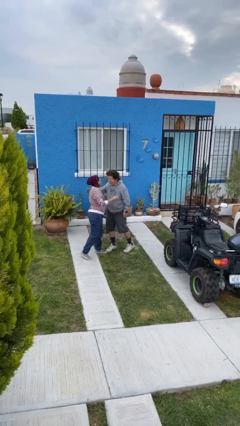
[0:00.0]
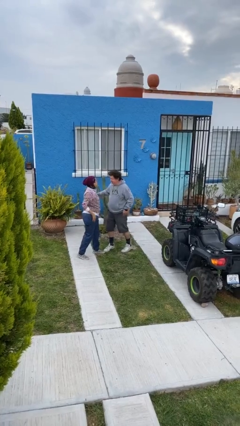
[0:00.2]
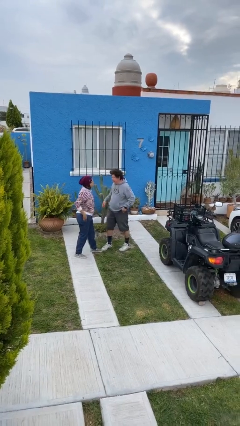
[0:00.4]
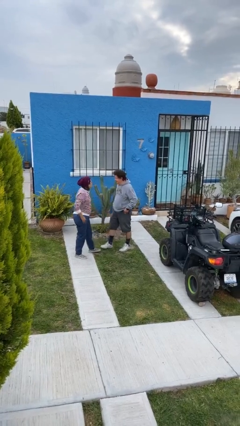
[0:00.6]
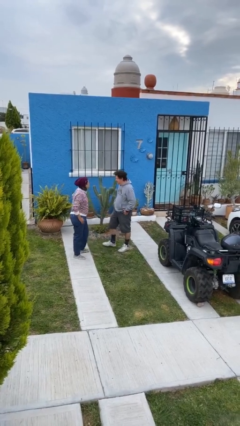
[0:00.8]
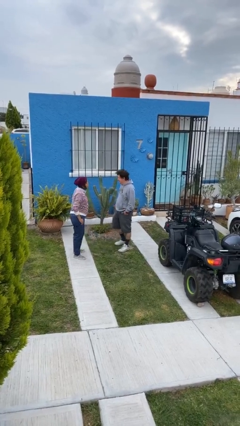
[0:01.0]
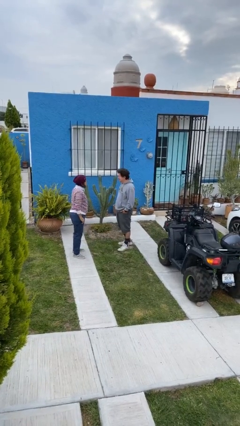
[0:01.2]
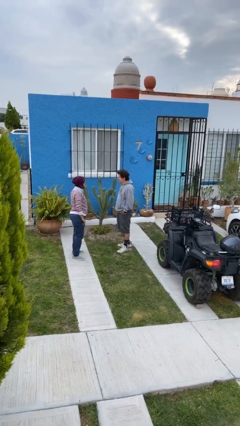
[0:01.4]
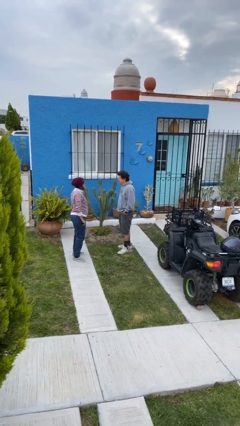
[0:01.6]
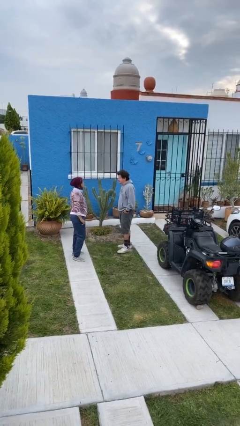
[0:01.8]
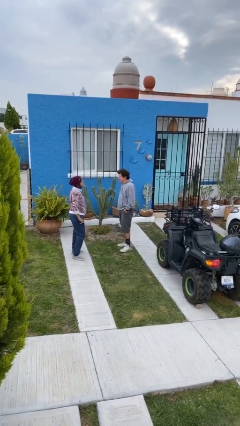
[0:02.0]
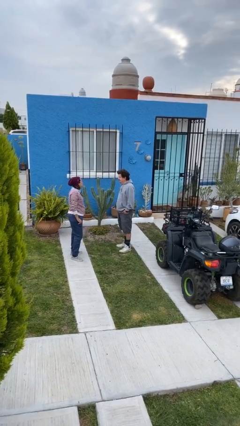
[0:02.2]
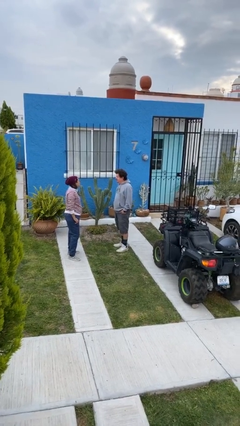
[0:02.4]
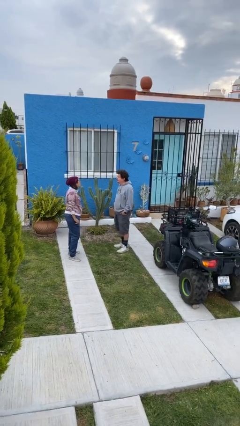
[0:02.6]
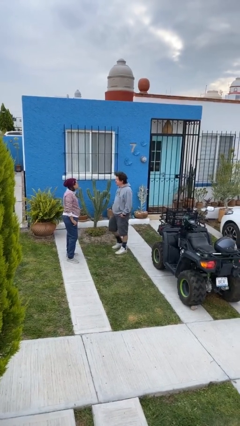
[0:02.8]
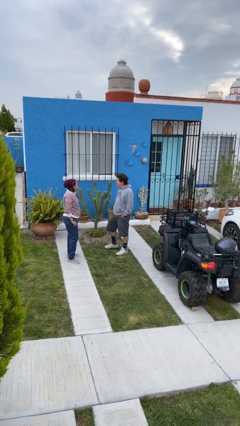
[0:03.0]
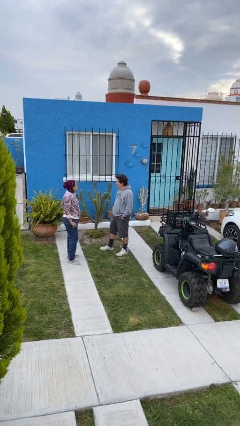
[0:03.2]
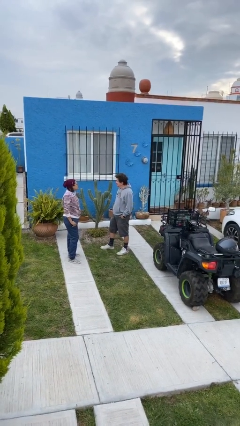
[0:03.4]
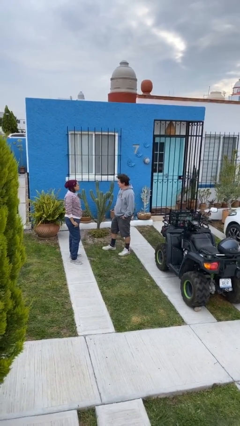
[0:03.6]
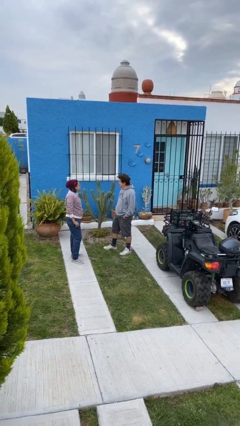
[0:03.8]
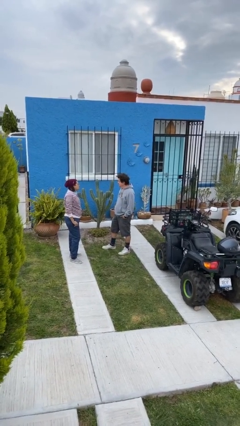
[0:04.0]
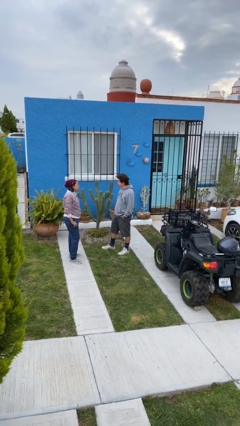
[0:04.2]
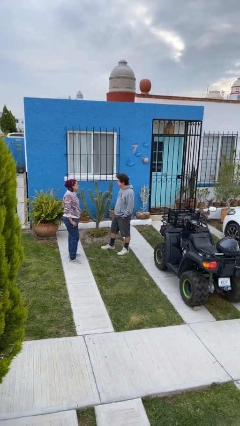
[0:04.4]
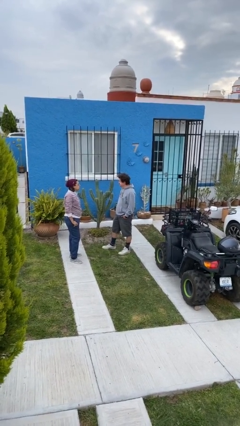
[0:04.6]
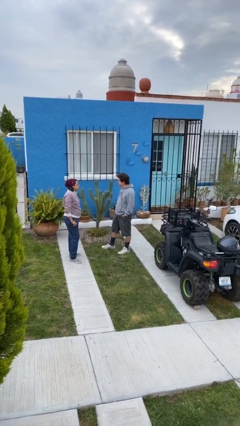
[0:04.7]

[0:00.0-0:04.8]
person talks to person

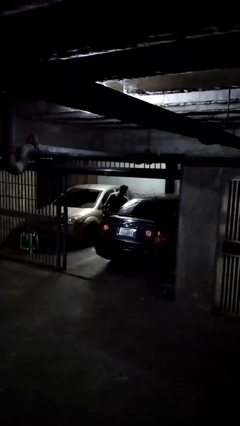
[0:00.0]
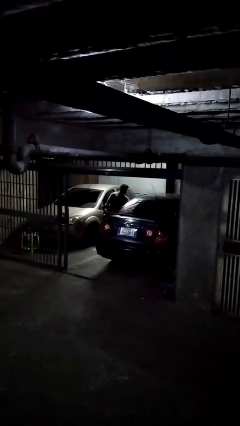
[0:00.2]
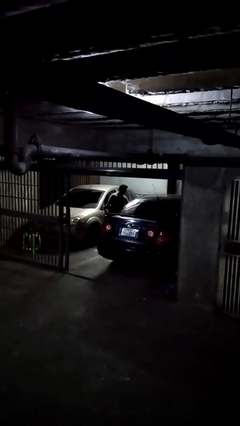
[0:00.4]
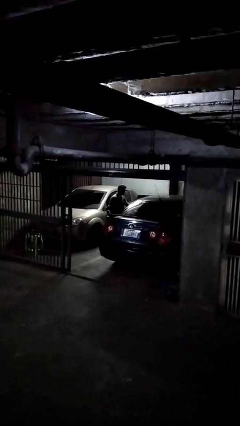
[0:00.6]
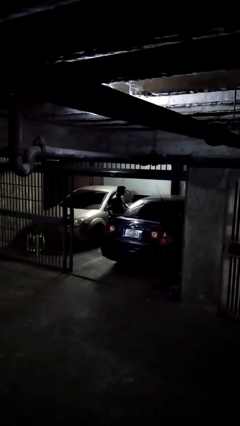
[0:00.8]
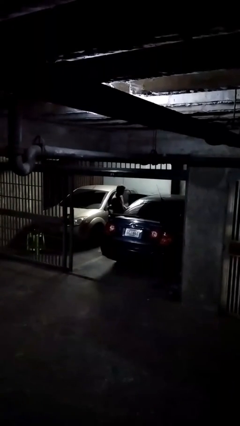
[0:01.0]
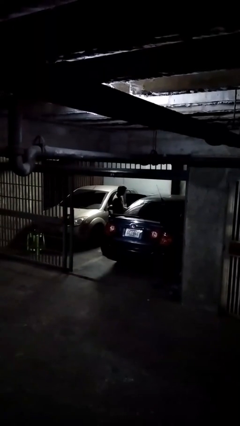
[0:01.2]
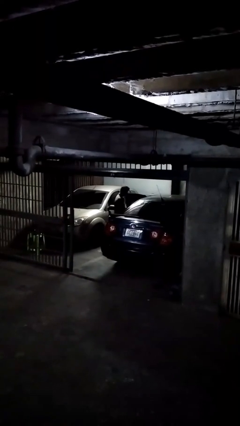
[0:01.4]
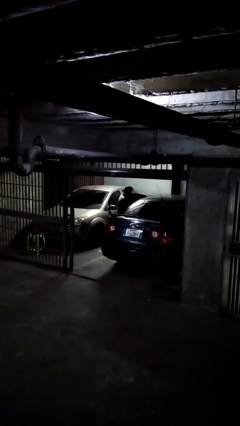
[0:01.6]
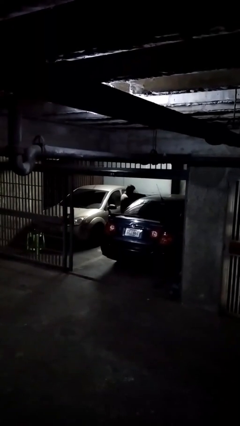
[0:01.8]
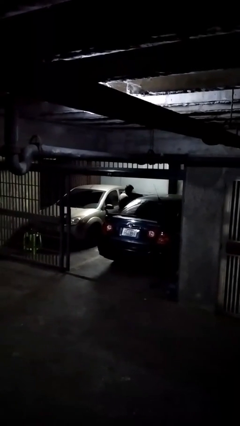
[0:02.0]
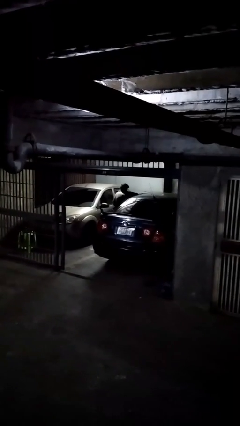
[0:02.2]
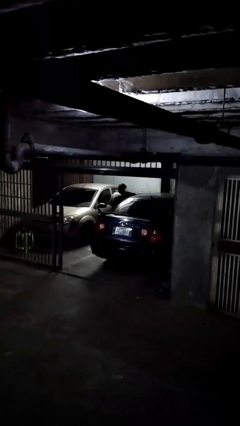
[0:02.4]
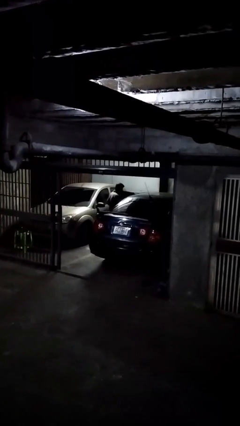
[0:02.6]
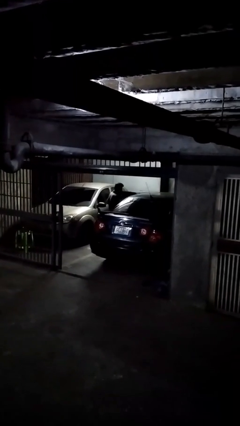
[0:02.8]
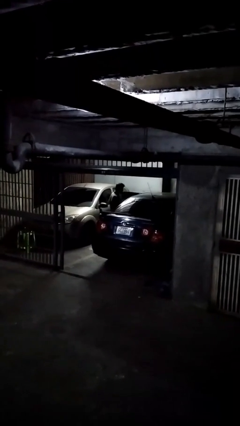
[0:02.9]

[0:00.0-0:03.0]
person opens car door

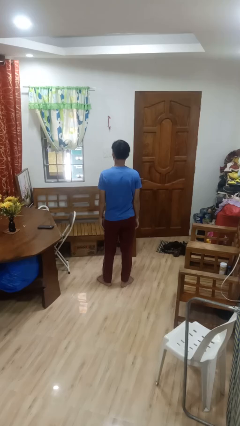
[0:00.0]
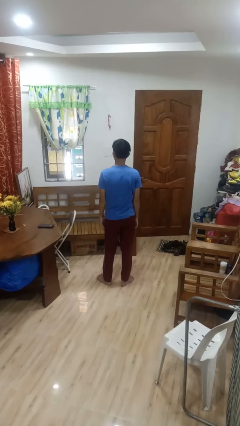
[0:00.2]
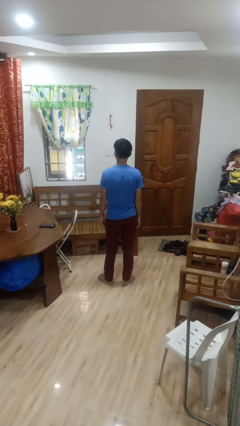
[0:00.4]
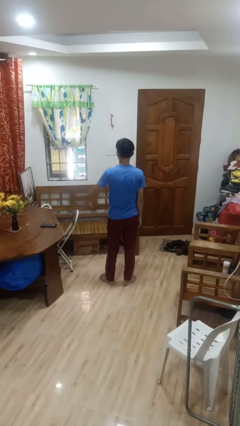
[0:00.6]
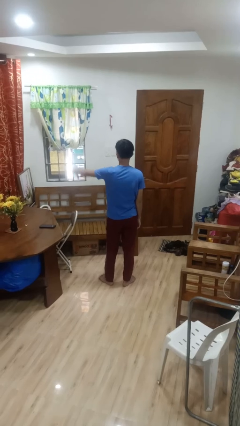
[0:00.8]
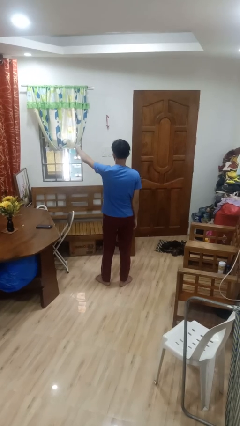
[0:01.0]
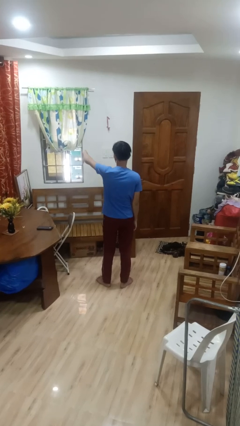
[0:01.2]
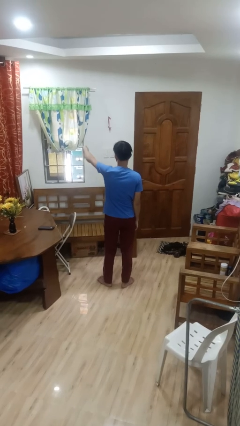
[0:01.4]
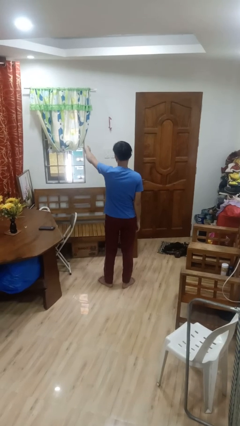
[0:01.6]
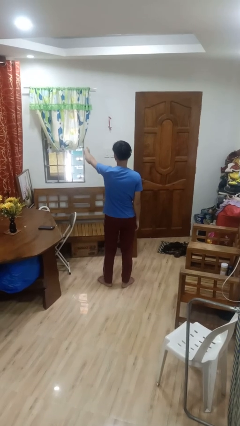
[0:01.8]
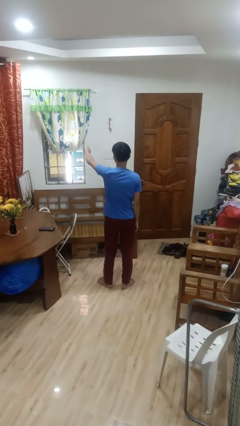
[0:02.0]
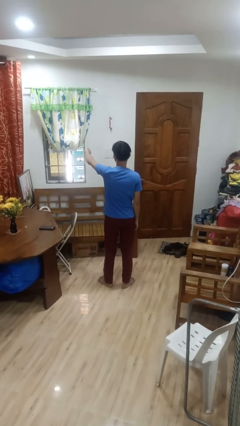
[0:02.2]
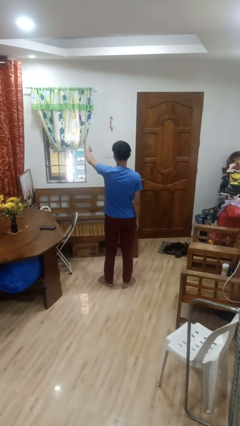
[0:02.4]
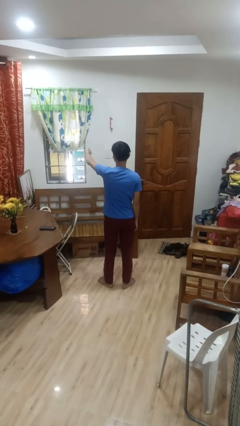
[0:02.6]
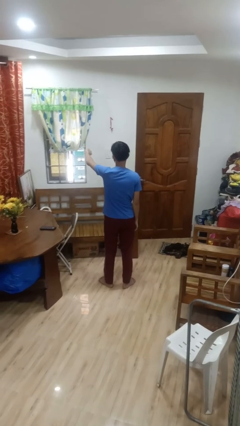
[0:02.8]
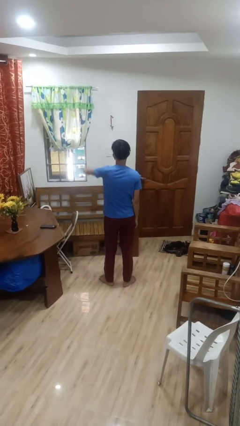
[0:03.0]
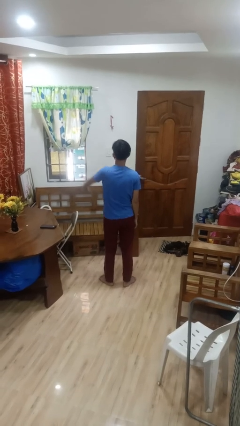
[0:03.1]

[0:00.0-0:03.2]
person gestures thumbs down

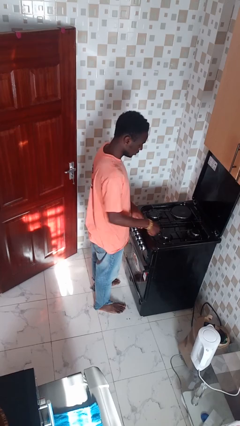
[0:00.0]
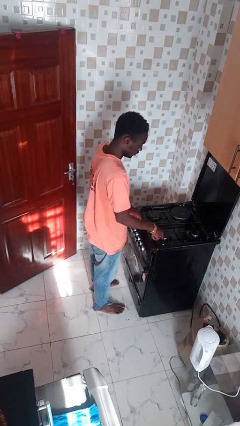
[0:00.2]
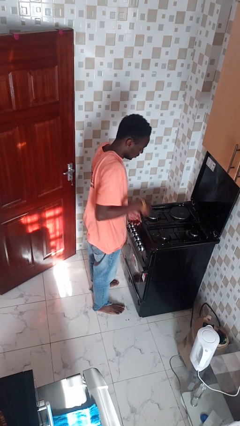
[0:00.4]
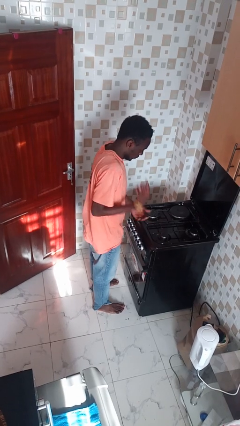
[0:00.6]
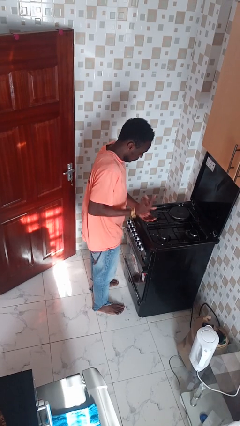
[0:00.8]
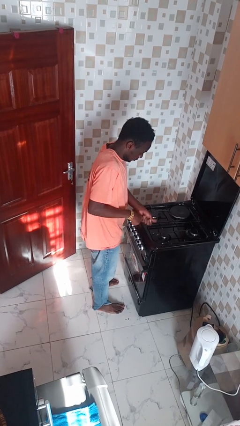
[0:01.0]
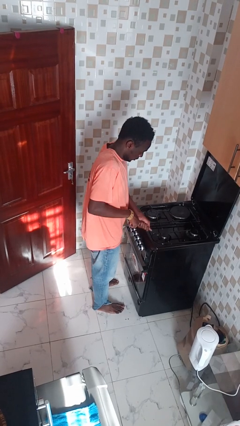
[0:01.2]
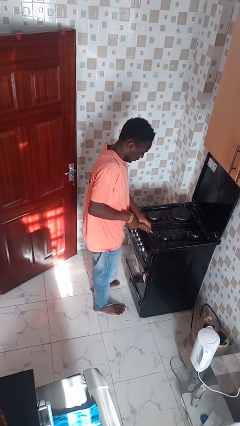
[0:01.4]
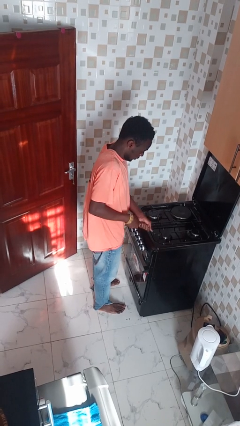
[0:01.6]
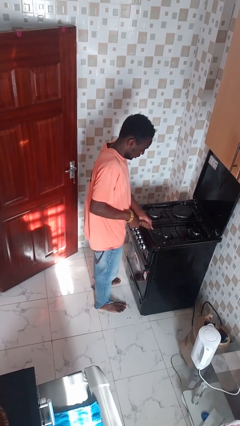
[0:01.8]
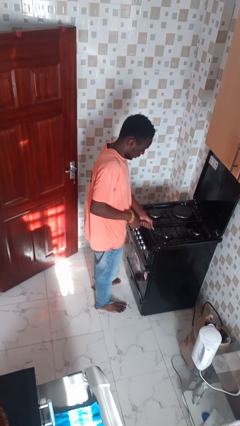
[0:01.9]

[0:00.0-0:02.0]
person burns hand

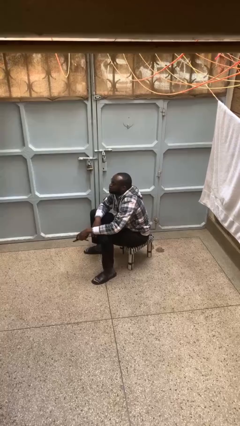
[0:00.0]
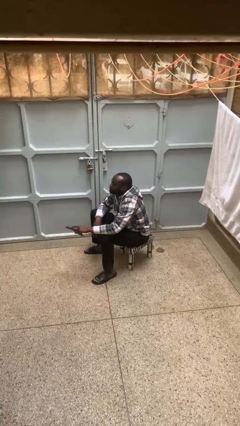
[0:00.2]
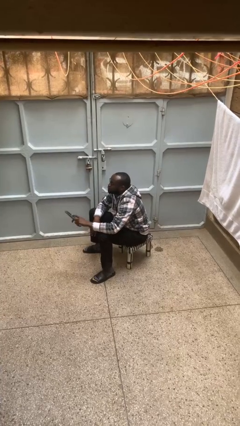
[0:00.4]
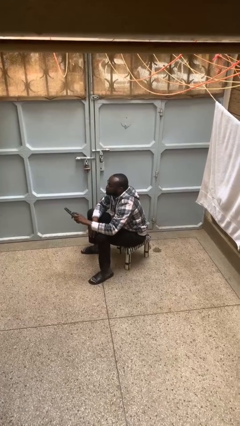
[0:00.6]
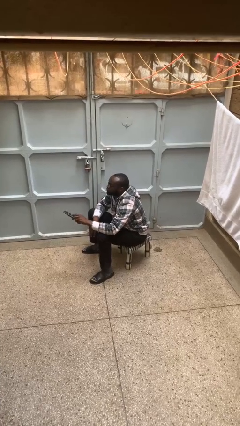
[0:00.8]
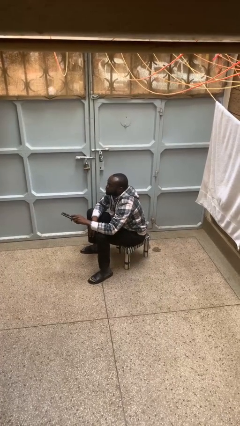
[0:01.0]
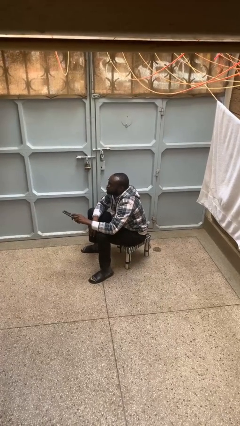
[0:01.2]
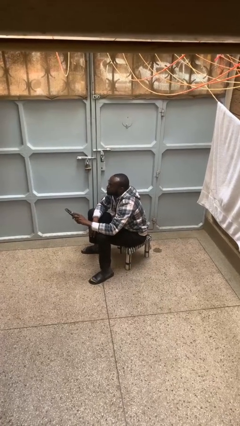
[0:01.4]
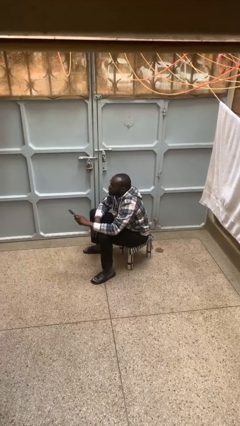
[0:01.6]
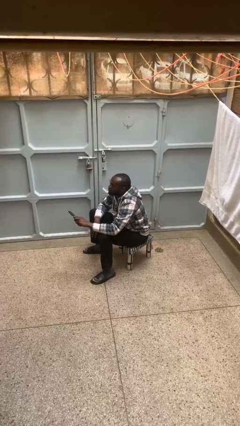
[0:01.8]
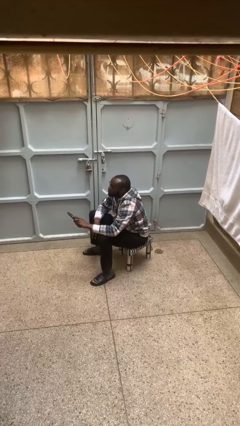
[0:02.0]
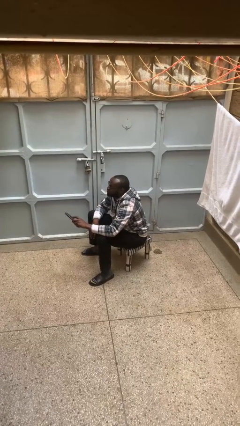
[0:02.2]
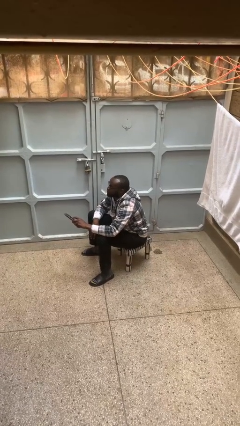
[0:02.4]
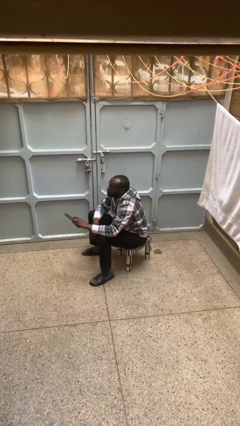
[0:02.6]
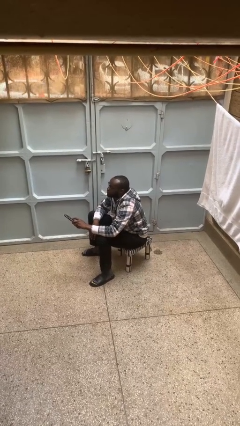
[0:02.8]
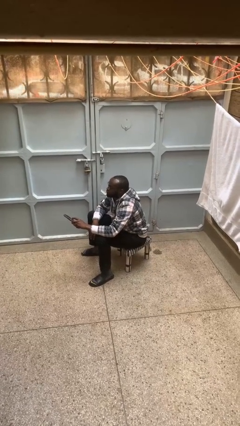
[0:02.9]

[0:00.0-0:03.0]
person uses television remote

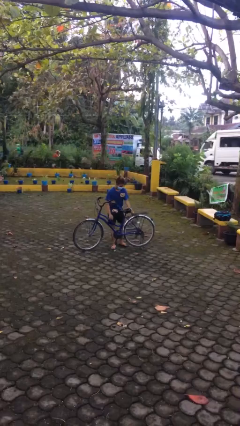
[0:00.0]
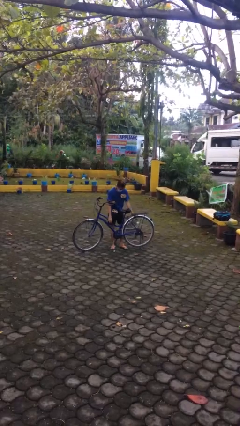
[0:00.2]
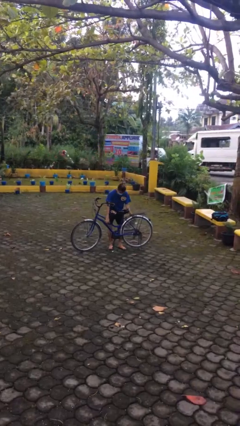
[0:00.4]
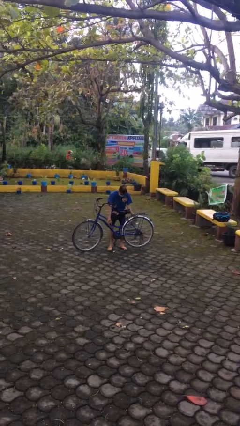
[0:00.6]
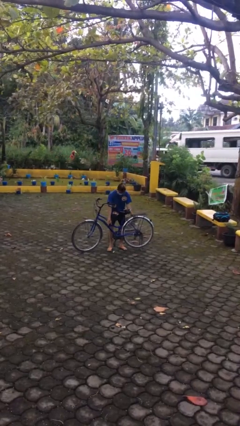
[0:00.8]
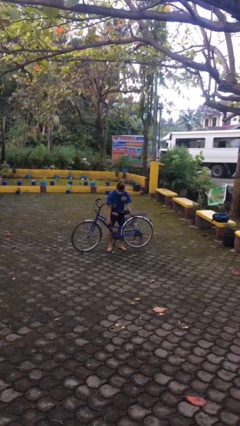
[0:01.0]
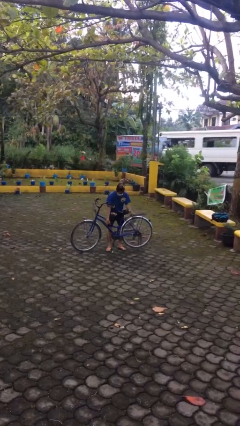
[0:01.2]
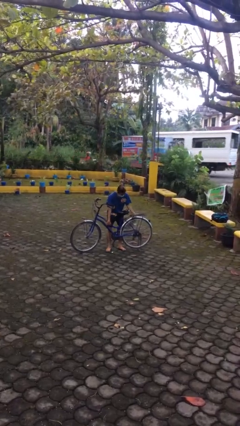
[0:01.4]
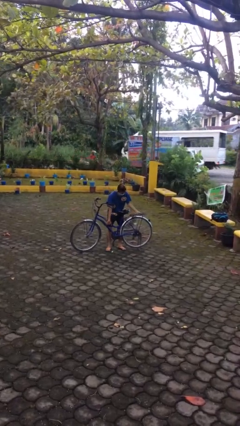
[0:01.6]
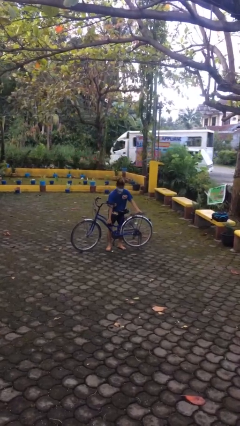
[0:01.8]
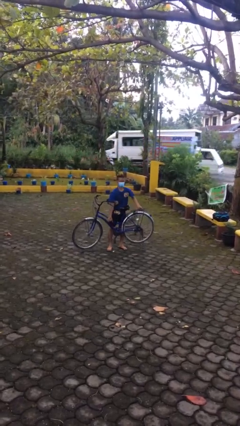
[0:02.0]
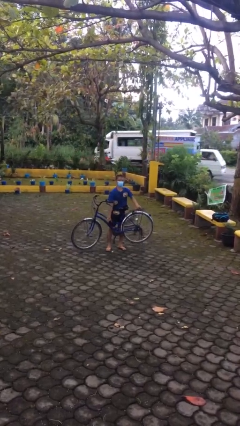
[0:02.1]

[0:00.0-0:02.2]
person picks up object from floor
